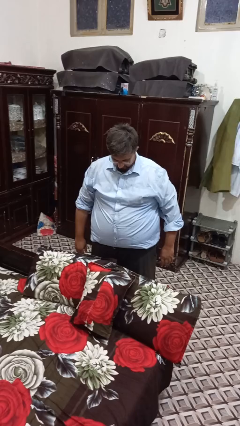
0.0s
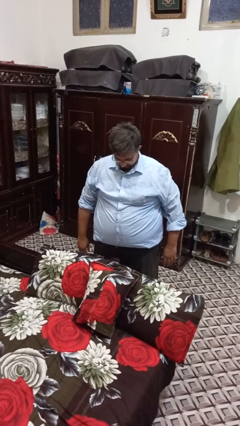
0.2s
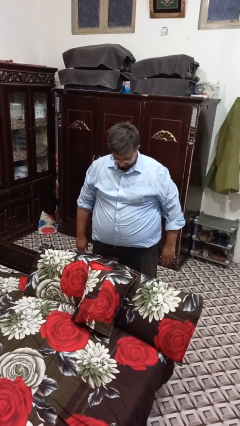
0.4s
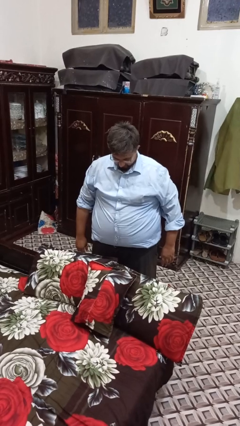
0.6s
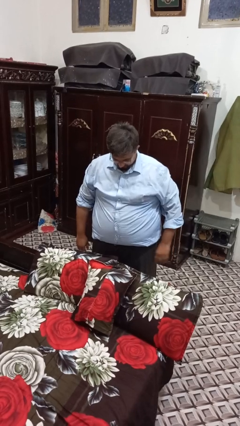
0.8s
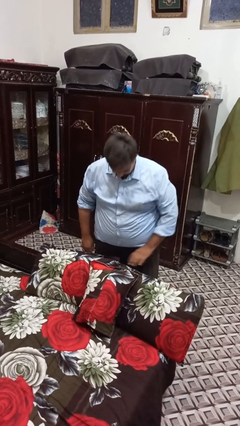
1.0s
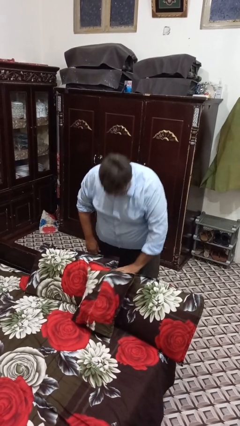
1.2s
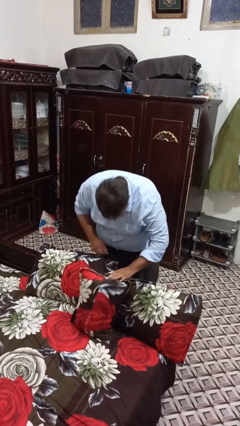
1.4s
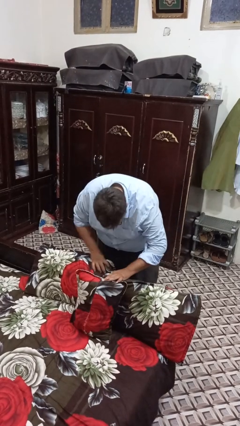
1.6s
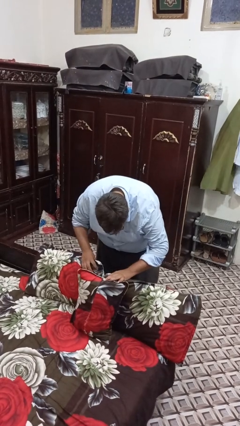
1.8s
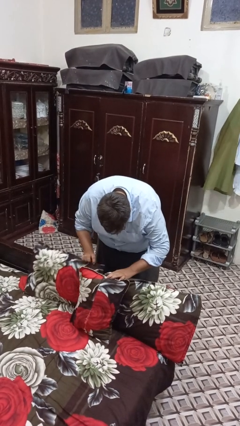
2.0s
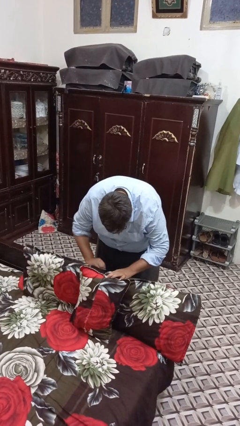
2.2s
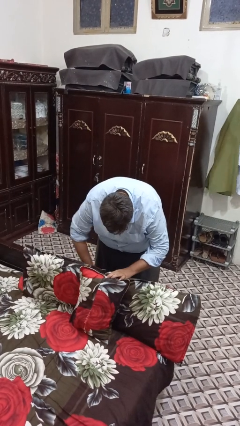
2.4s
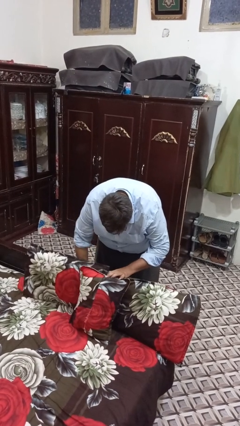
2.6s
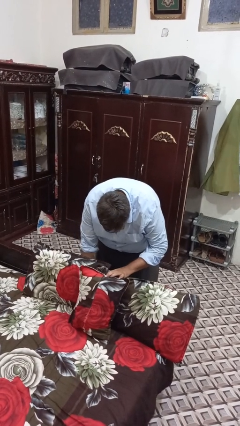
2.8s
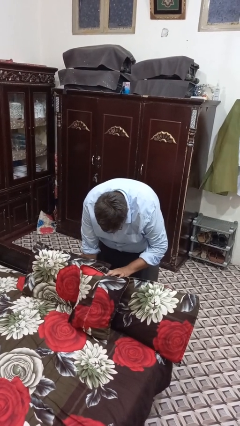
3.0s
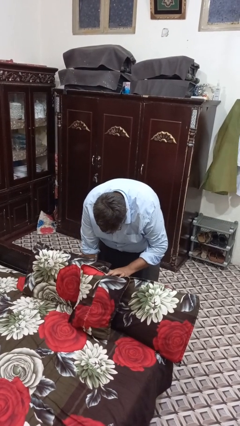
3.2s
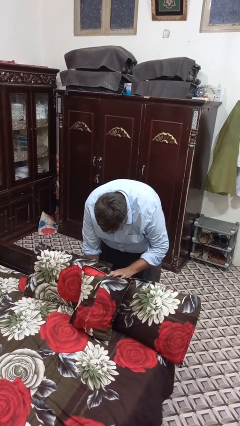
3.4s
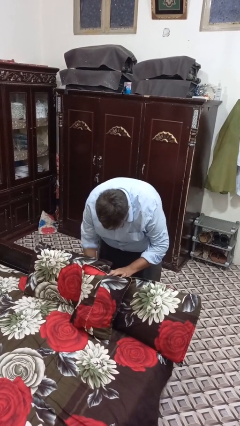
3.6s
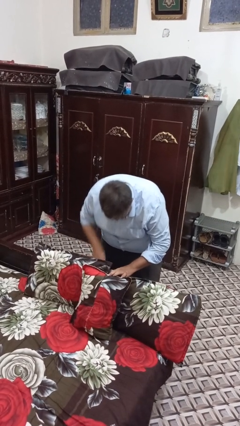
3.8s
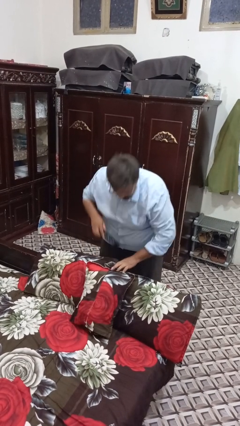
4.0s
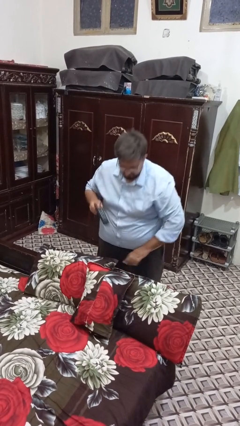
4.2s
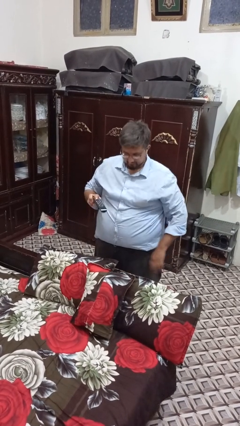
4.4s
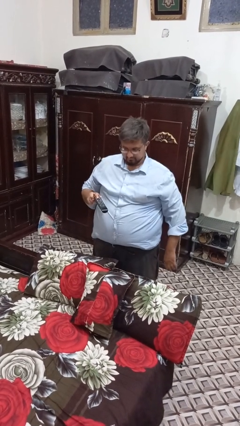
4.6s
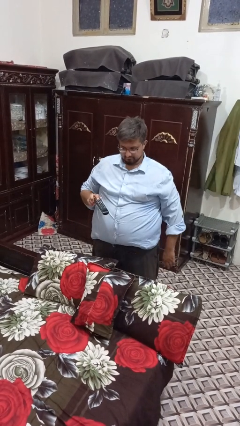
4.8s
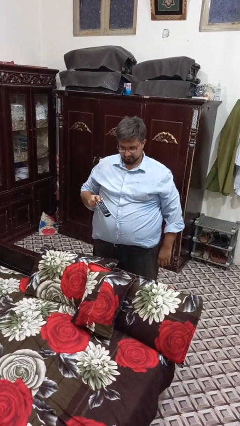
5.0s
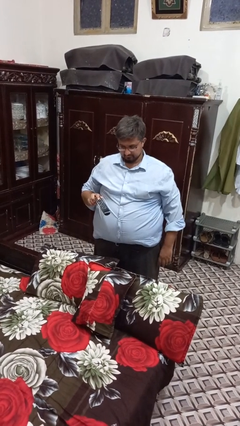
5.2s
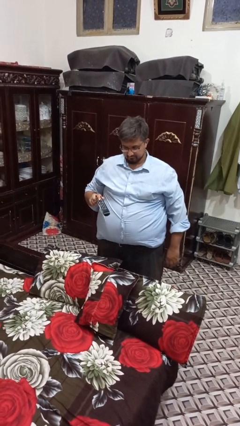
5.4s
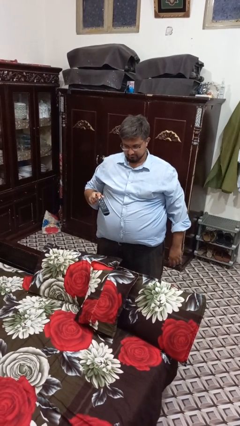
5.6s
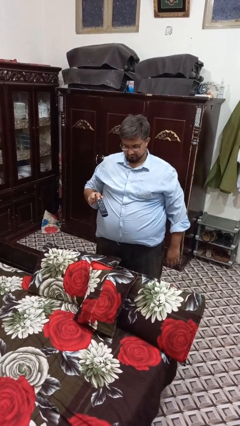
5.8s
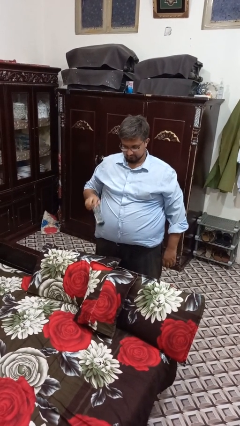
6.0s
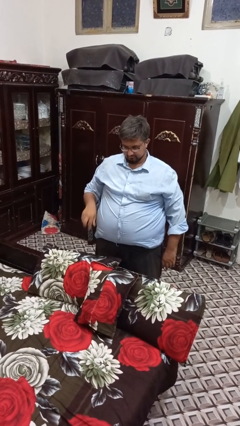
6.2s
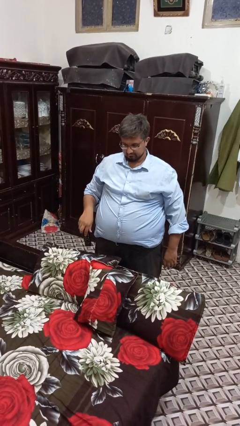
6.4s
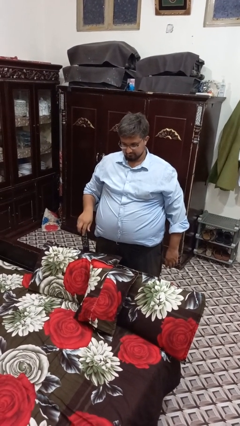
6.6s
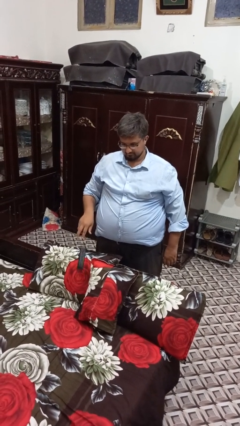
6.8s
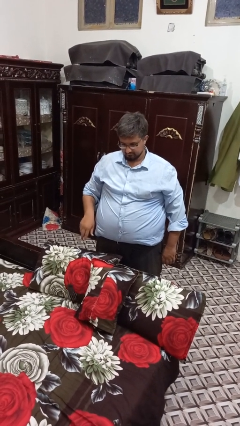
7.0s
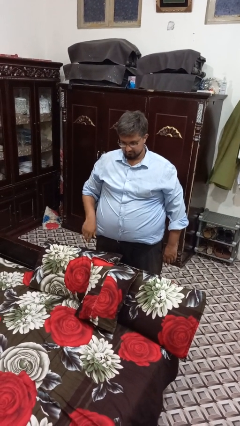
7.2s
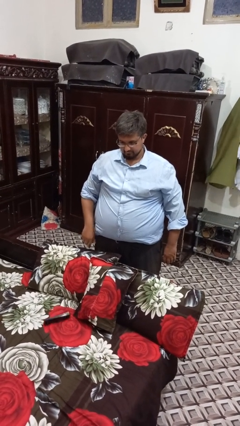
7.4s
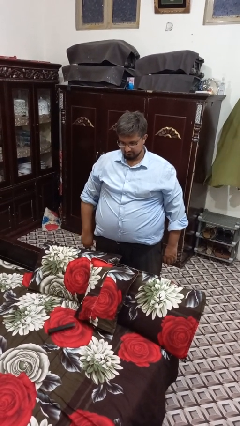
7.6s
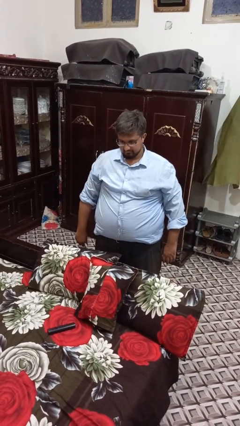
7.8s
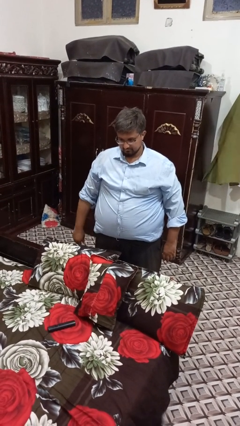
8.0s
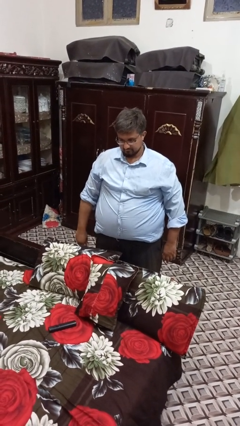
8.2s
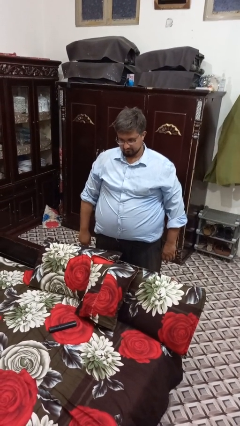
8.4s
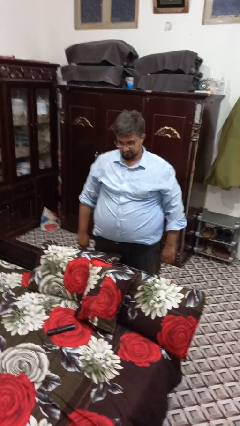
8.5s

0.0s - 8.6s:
person searches in couch

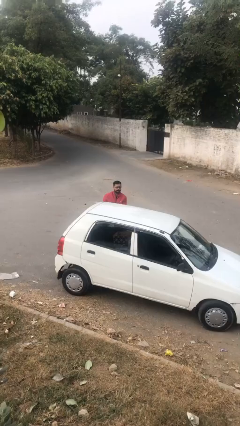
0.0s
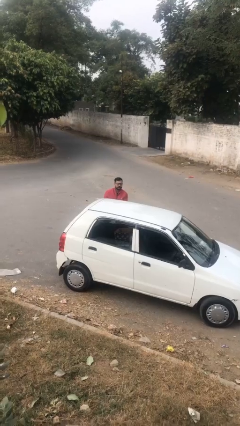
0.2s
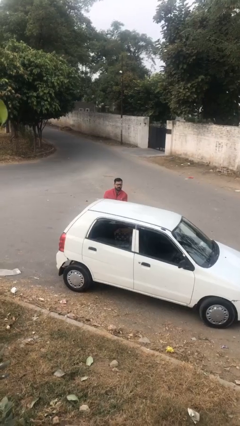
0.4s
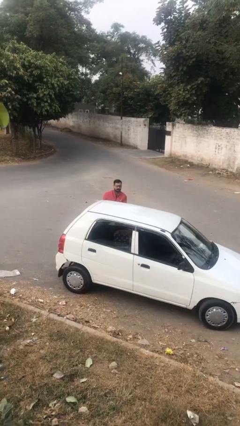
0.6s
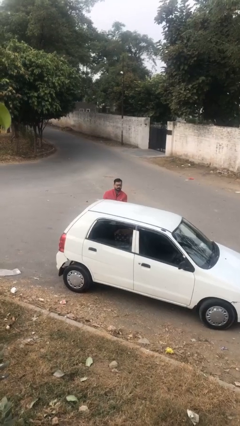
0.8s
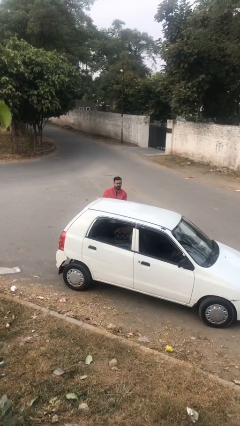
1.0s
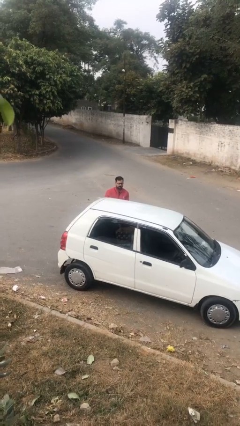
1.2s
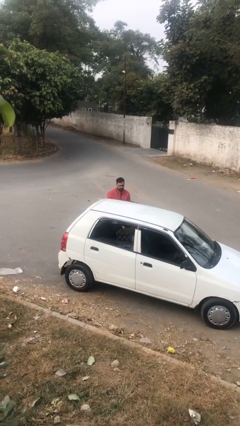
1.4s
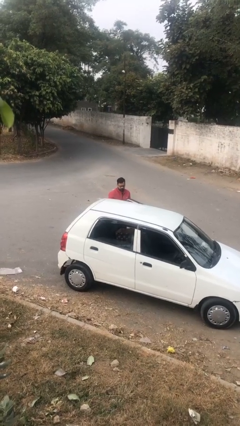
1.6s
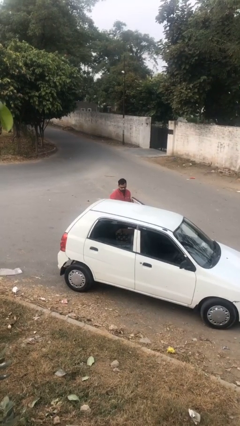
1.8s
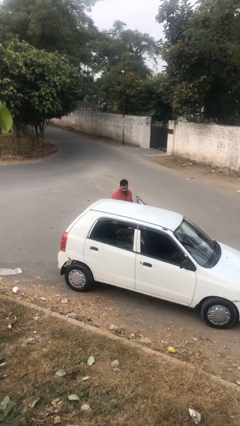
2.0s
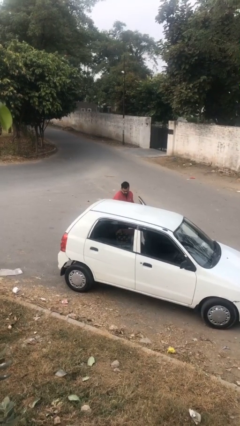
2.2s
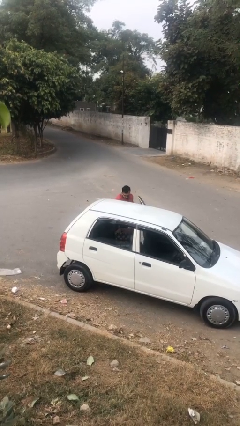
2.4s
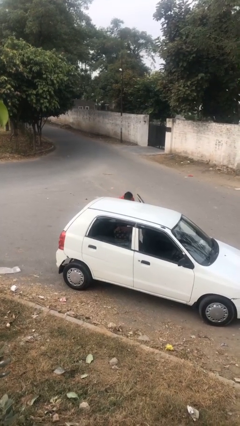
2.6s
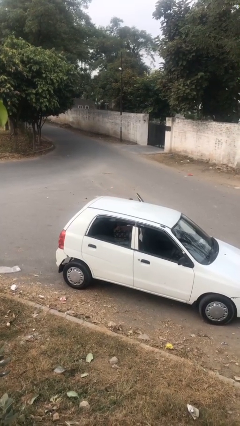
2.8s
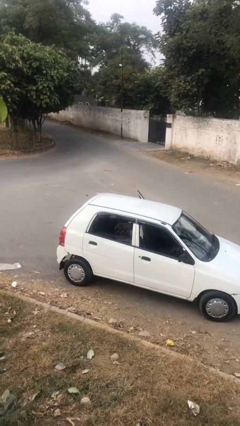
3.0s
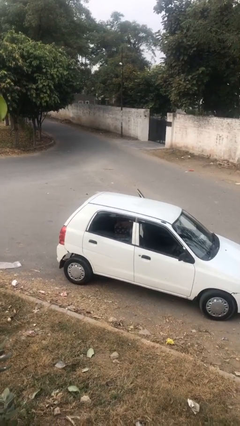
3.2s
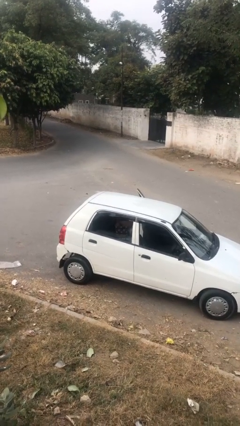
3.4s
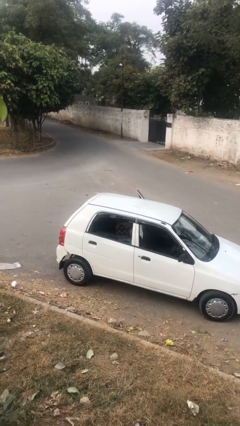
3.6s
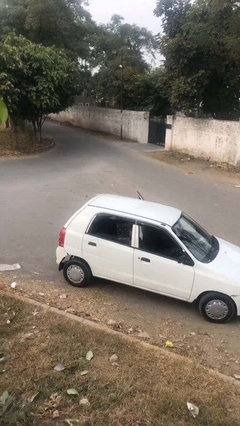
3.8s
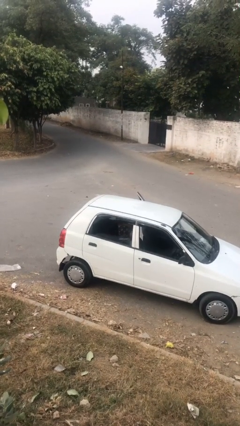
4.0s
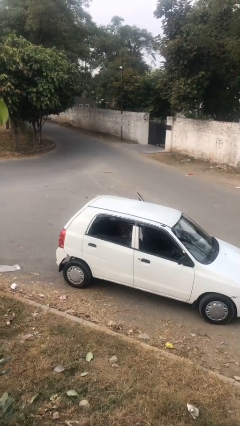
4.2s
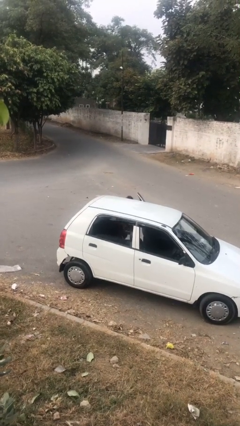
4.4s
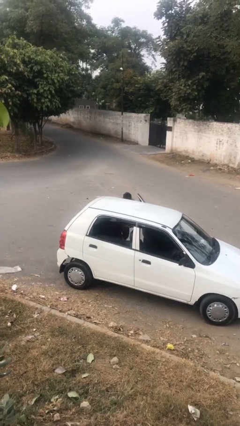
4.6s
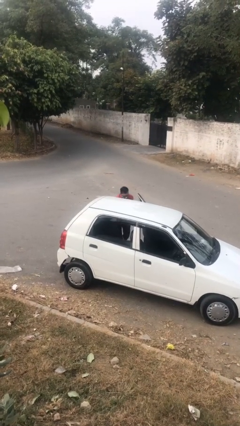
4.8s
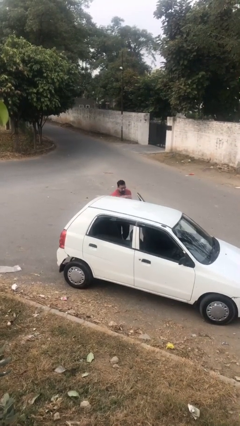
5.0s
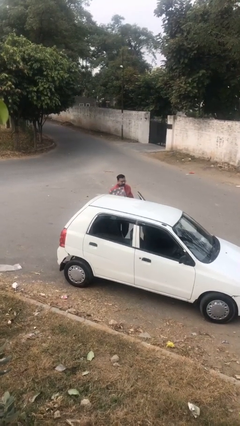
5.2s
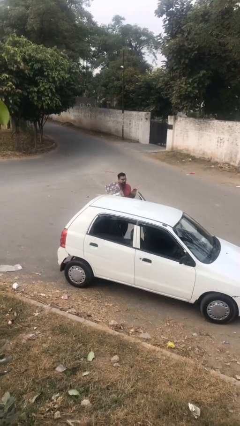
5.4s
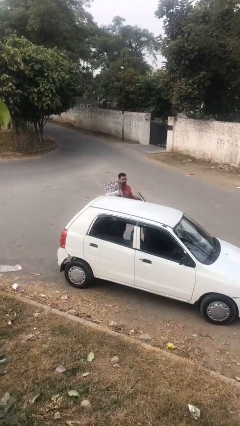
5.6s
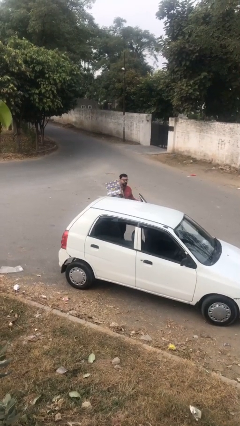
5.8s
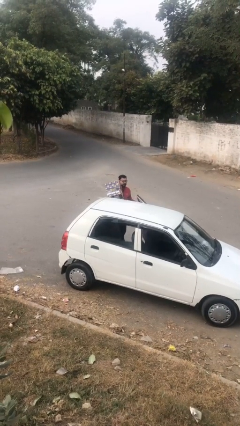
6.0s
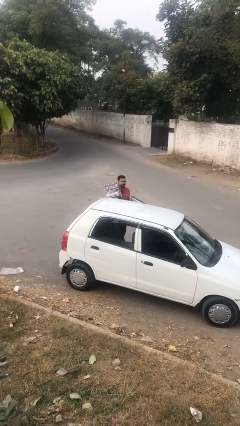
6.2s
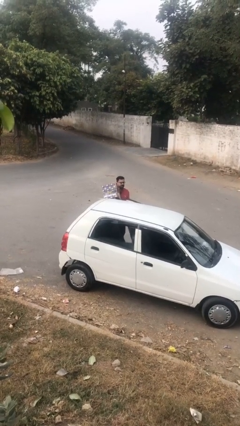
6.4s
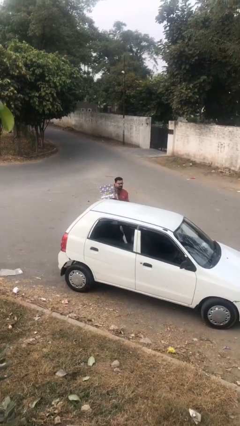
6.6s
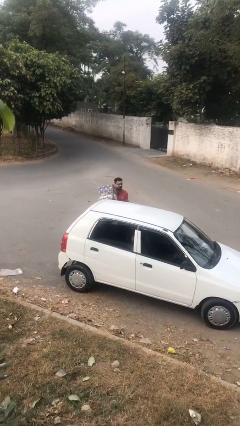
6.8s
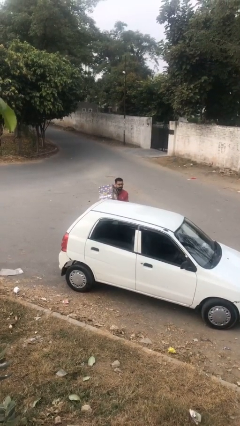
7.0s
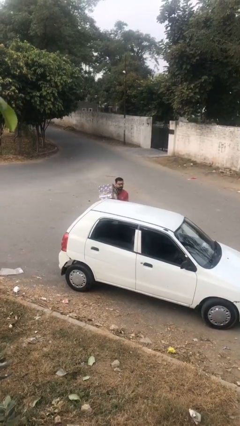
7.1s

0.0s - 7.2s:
person unloads car

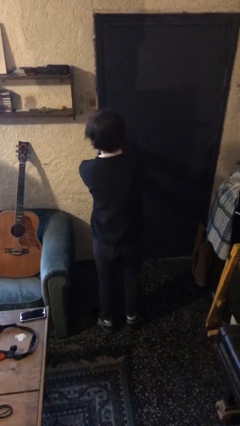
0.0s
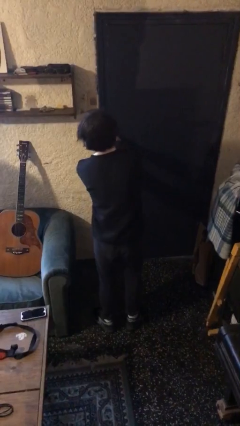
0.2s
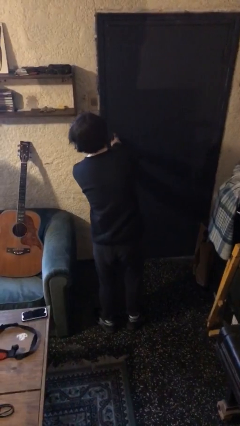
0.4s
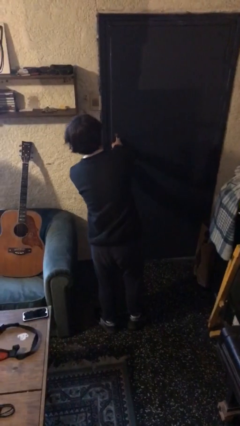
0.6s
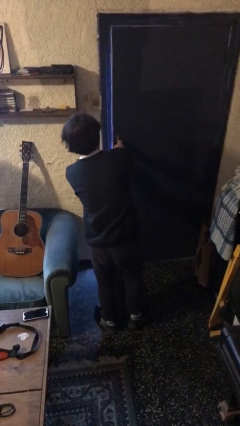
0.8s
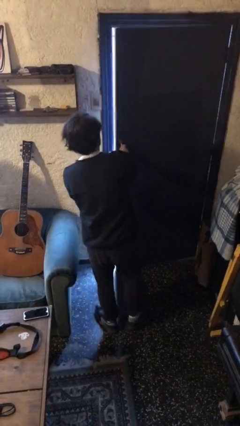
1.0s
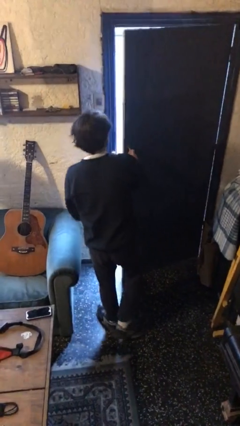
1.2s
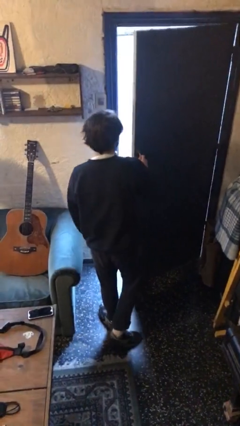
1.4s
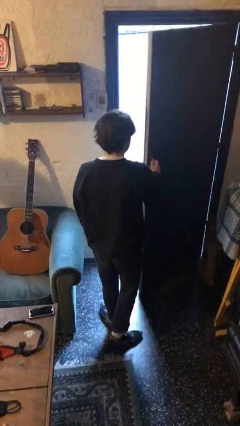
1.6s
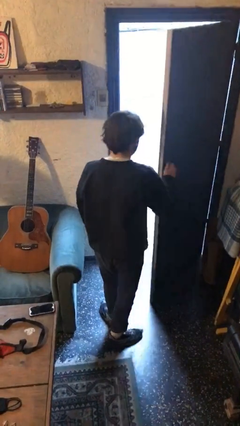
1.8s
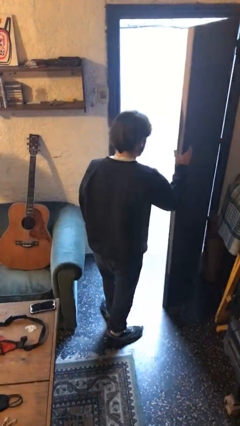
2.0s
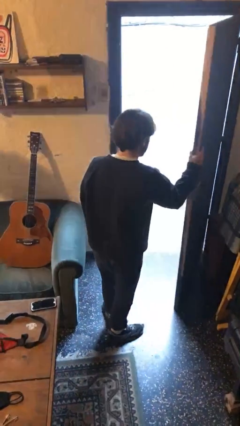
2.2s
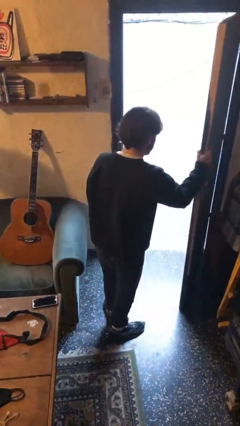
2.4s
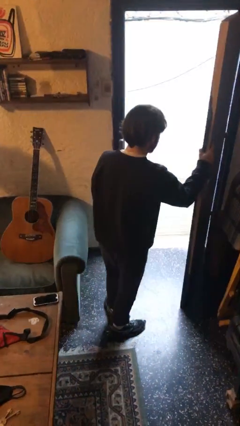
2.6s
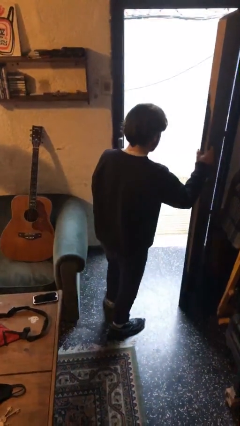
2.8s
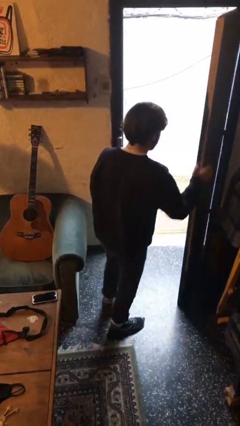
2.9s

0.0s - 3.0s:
person opens facility door
